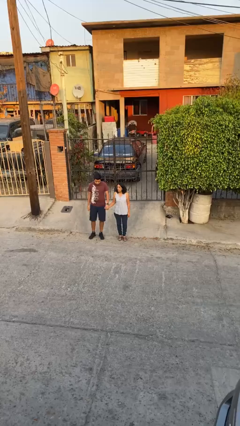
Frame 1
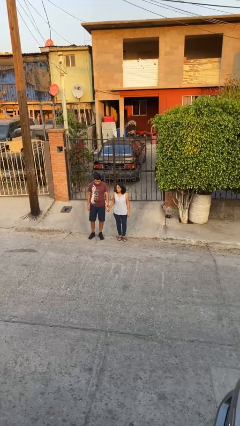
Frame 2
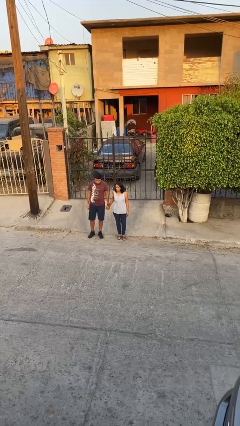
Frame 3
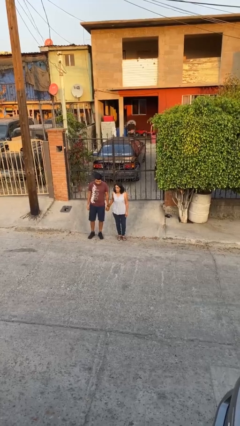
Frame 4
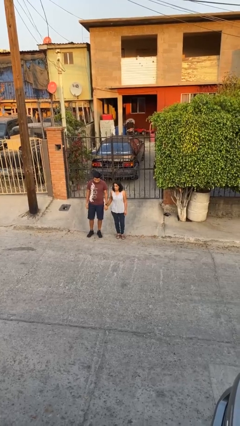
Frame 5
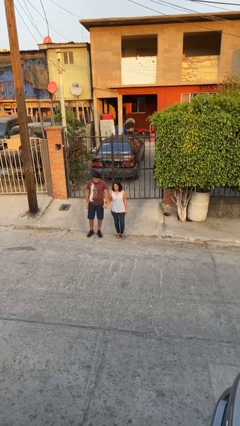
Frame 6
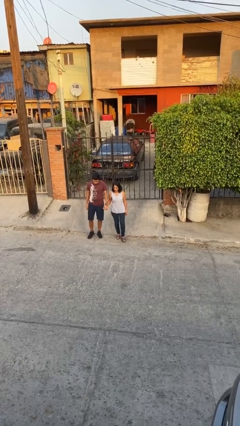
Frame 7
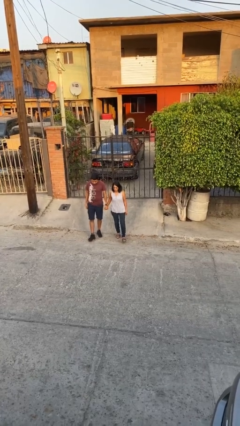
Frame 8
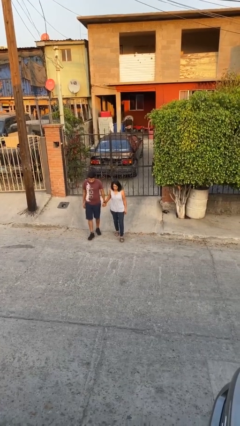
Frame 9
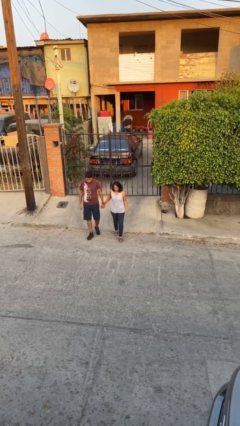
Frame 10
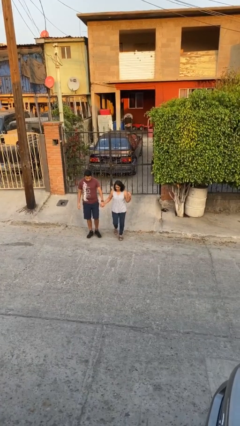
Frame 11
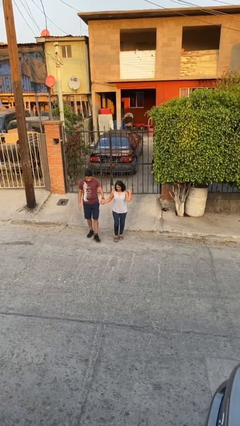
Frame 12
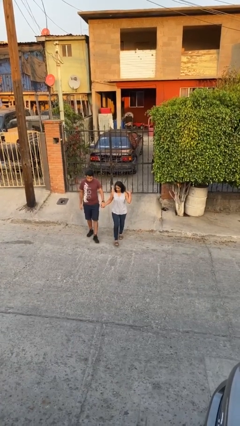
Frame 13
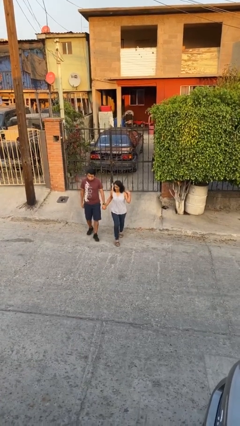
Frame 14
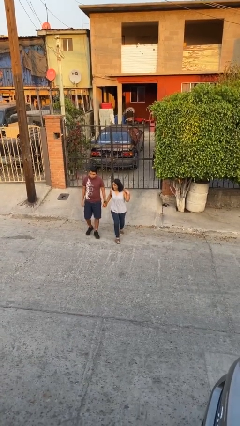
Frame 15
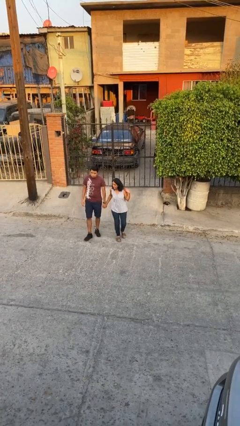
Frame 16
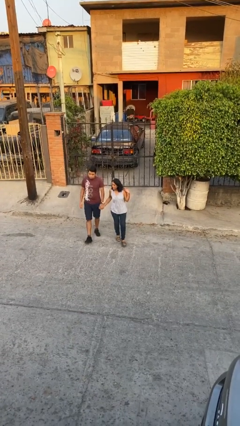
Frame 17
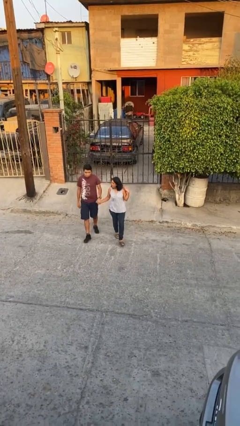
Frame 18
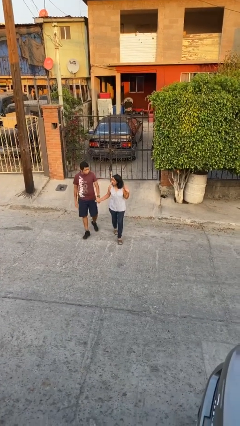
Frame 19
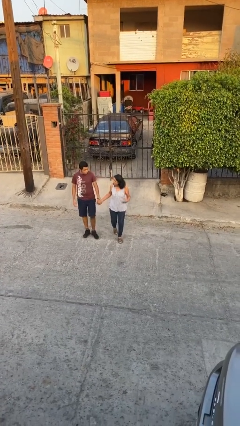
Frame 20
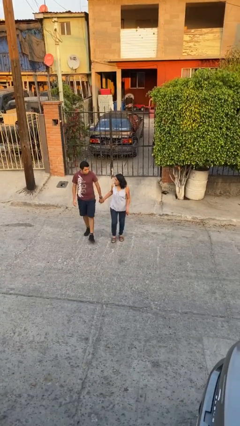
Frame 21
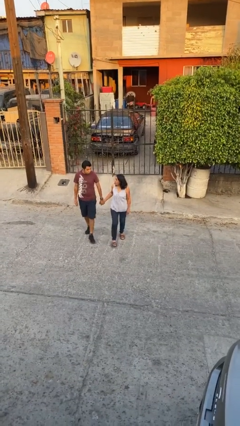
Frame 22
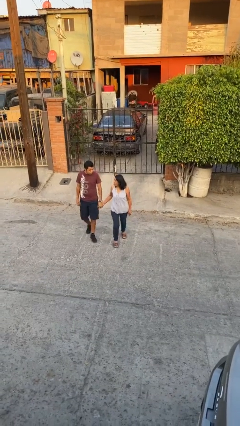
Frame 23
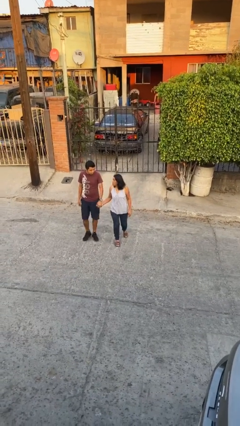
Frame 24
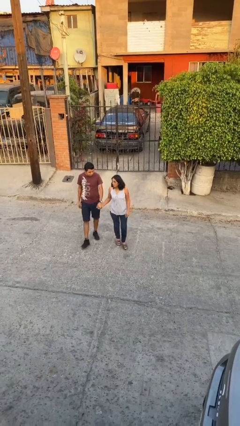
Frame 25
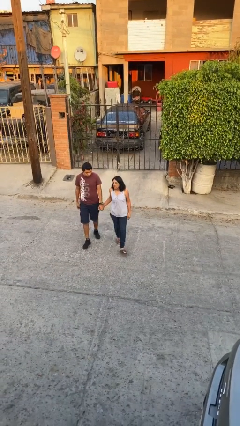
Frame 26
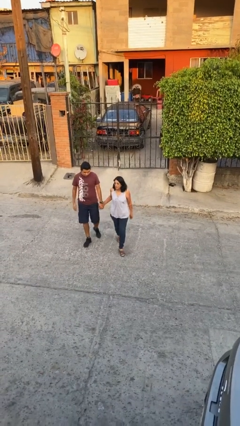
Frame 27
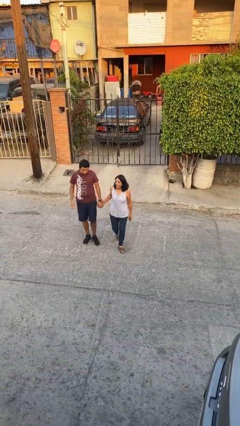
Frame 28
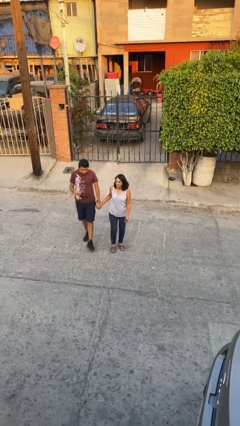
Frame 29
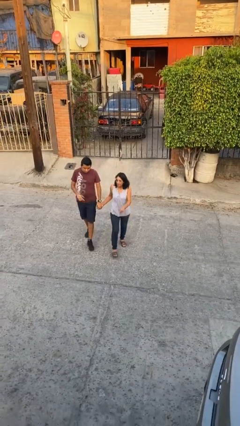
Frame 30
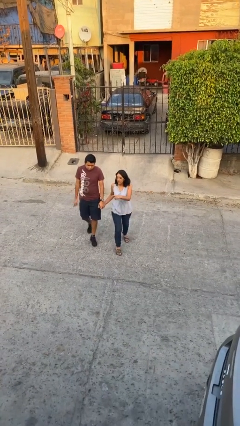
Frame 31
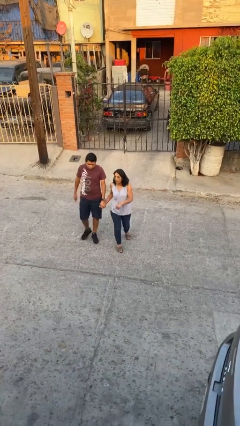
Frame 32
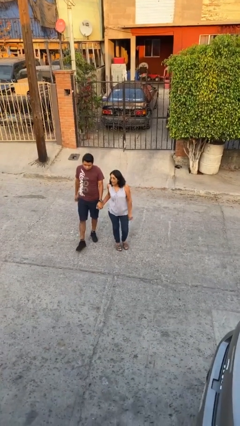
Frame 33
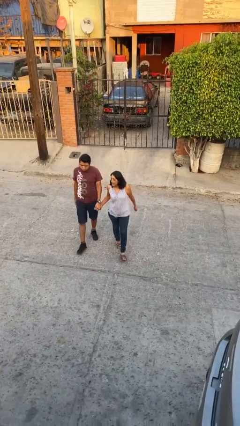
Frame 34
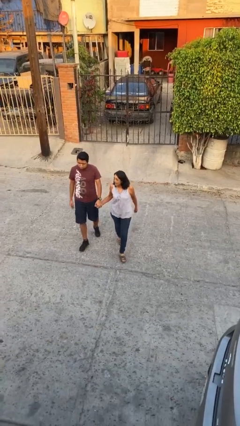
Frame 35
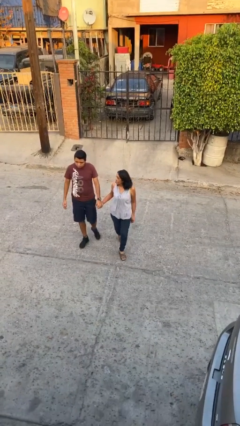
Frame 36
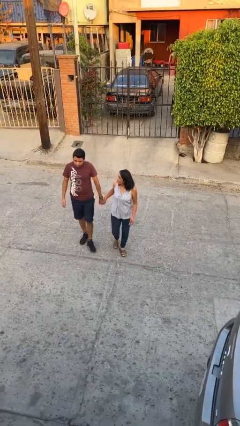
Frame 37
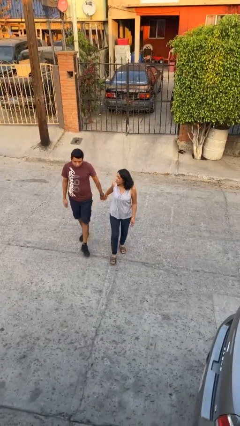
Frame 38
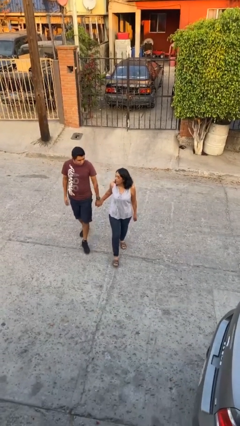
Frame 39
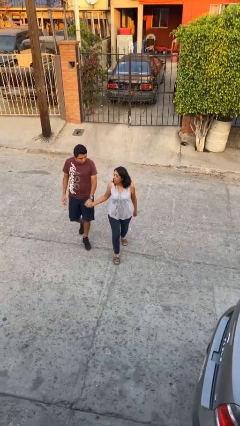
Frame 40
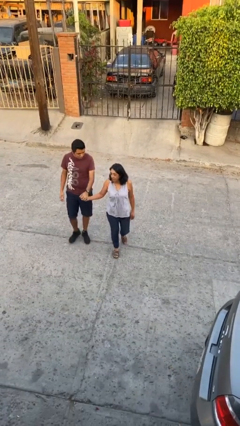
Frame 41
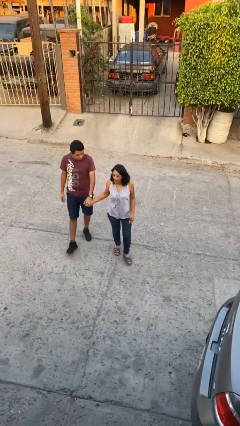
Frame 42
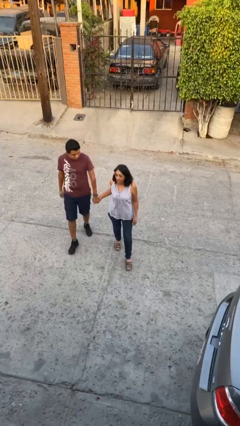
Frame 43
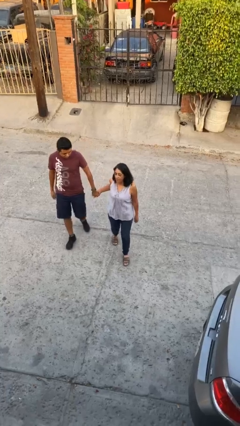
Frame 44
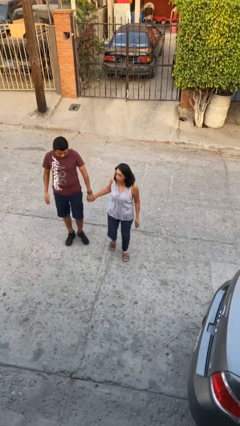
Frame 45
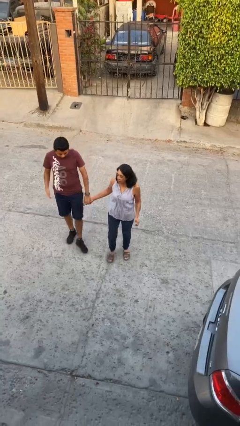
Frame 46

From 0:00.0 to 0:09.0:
person holds hand

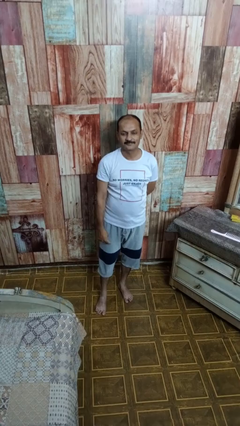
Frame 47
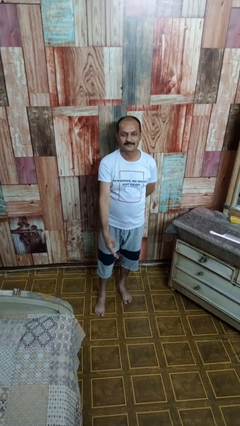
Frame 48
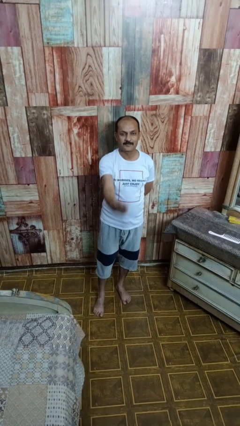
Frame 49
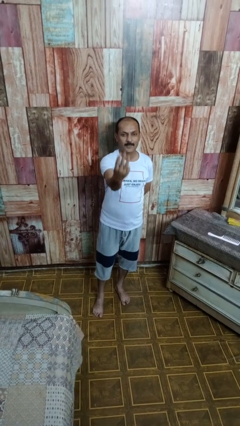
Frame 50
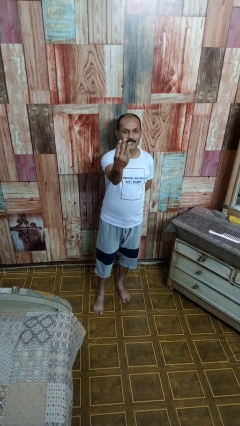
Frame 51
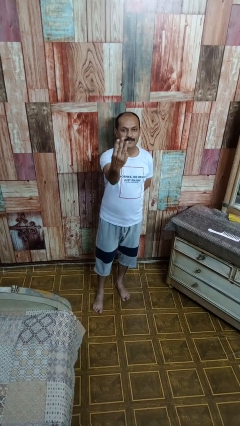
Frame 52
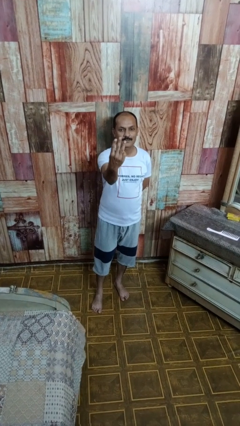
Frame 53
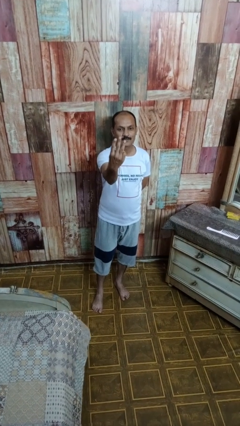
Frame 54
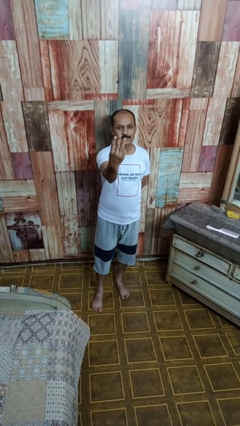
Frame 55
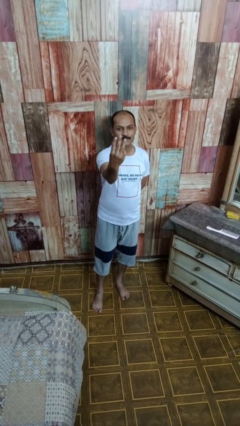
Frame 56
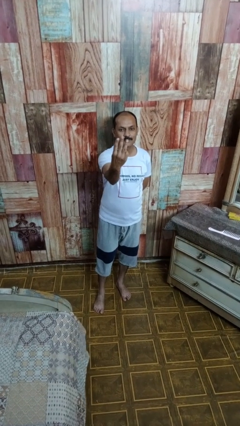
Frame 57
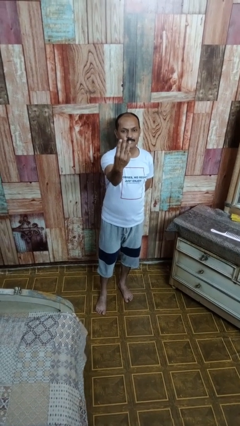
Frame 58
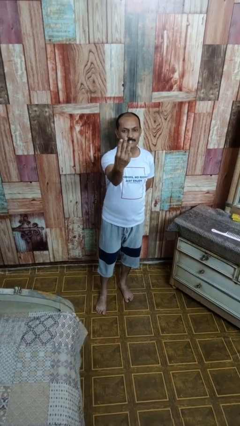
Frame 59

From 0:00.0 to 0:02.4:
person gestures number three

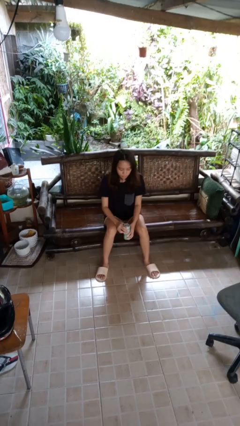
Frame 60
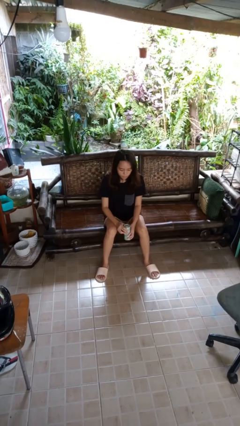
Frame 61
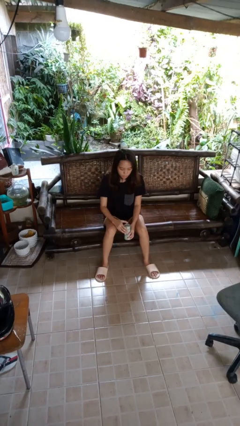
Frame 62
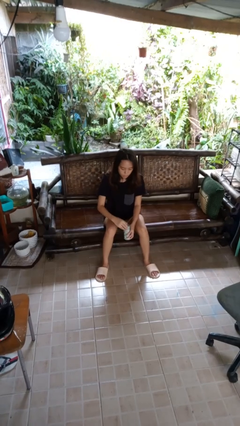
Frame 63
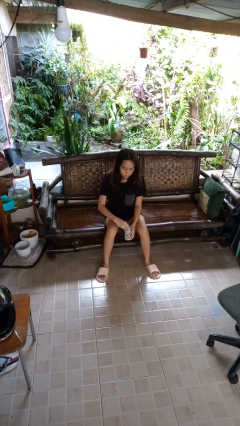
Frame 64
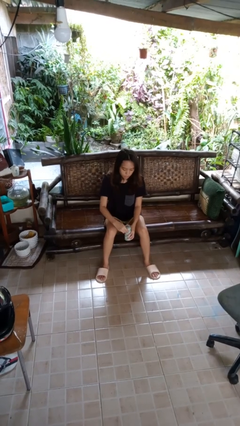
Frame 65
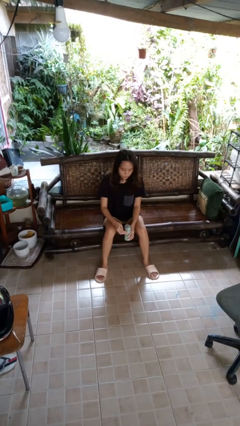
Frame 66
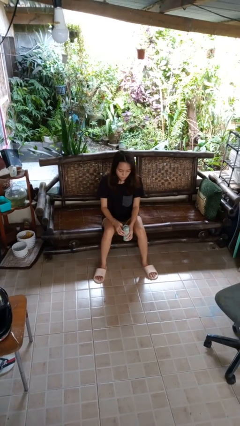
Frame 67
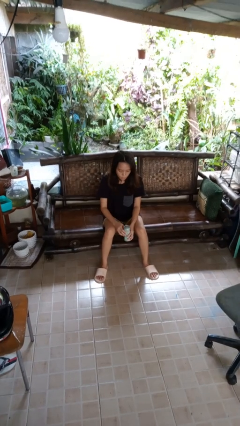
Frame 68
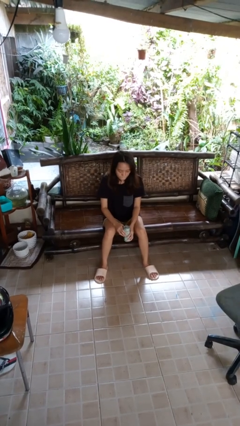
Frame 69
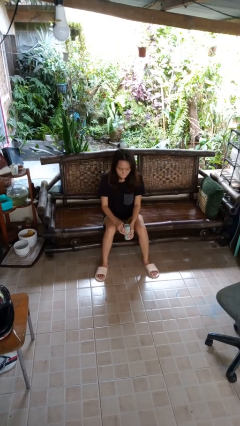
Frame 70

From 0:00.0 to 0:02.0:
person opens beverage can

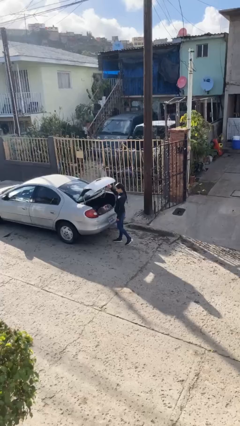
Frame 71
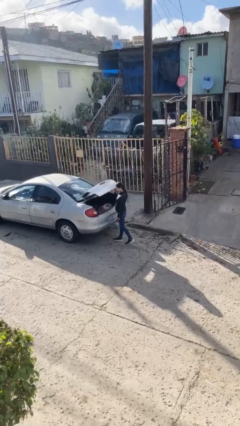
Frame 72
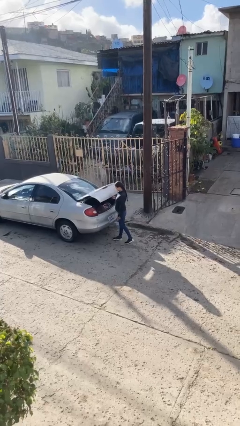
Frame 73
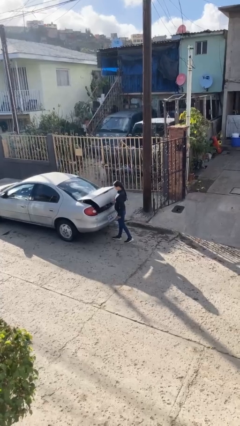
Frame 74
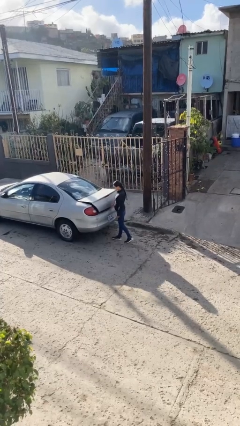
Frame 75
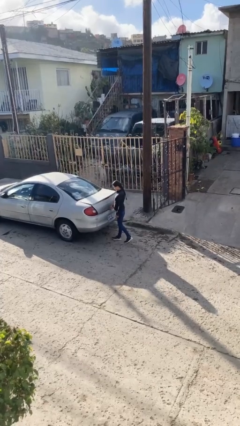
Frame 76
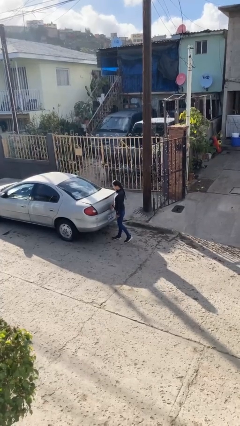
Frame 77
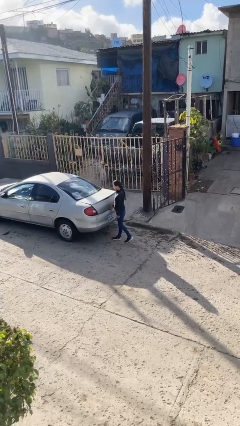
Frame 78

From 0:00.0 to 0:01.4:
person closes car trunk

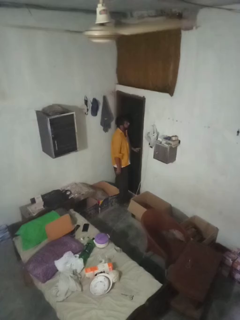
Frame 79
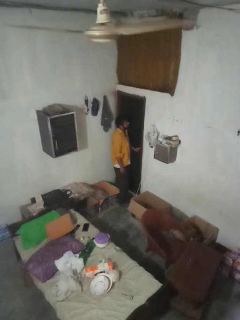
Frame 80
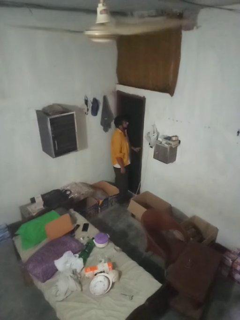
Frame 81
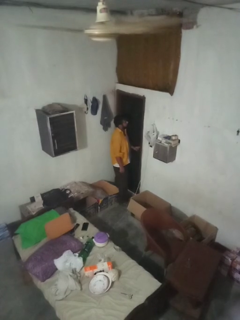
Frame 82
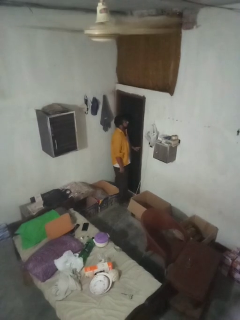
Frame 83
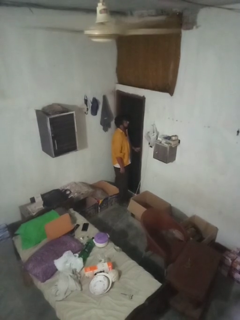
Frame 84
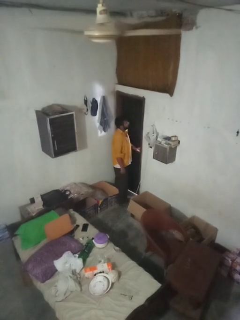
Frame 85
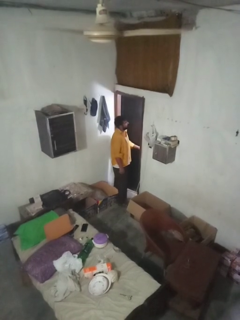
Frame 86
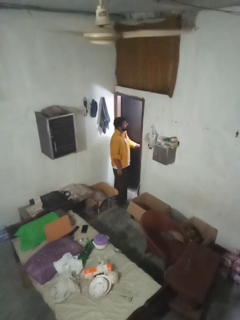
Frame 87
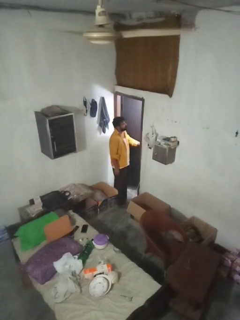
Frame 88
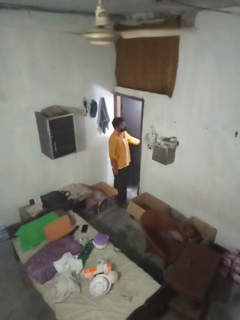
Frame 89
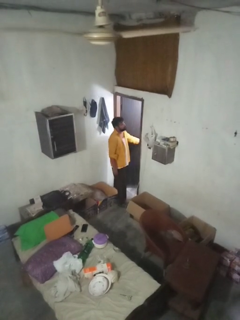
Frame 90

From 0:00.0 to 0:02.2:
person opens facility door

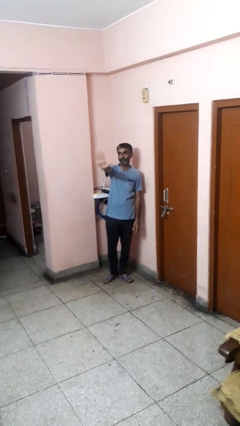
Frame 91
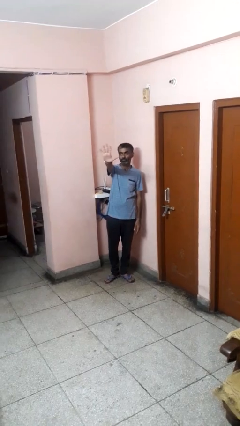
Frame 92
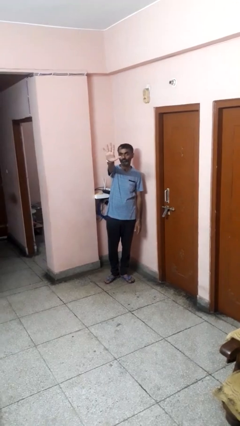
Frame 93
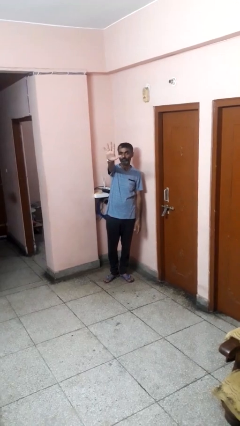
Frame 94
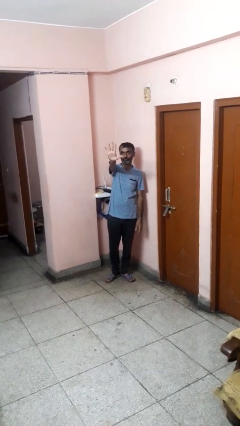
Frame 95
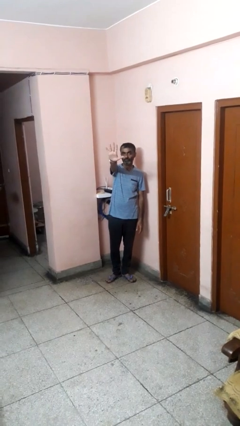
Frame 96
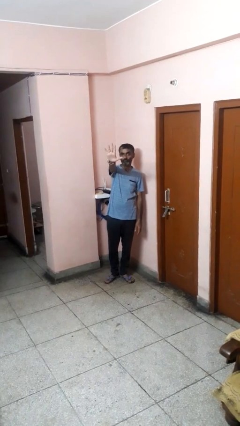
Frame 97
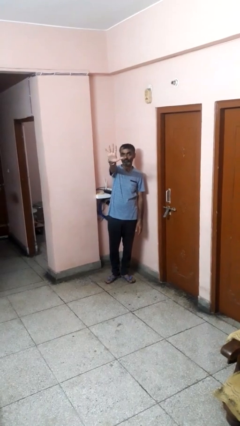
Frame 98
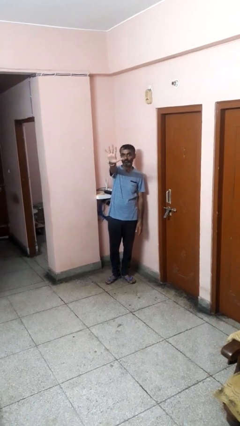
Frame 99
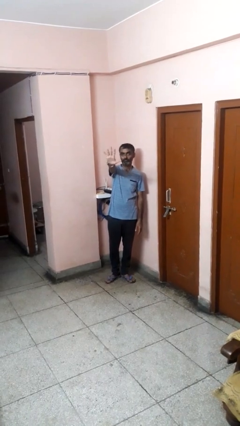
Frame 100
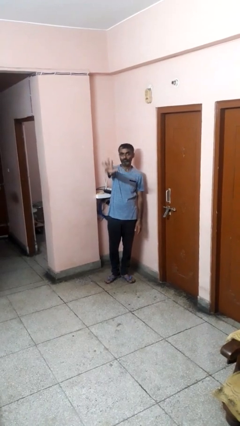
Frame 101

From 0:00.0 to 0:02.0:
person gestures number five
